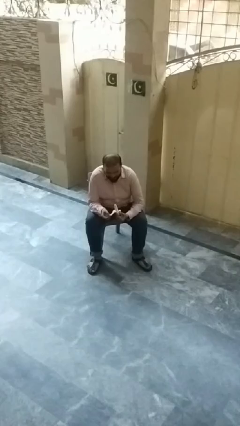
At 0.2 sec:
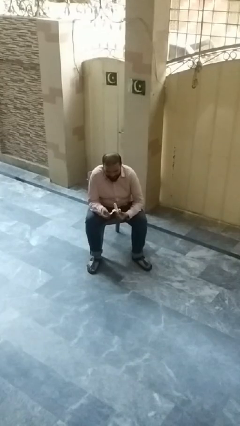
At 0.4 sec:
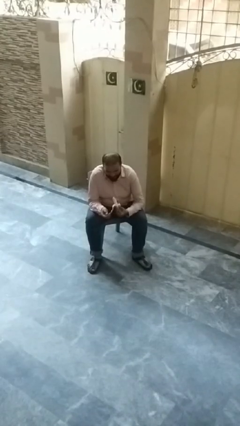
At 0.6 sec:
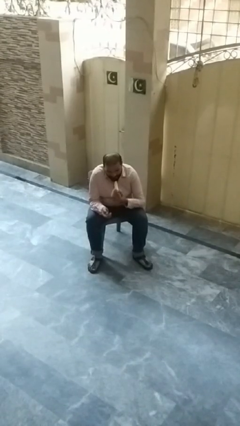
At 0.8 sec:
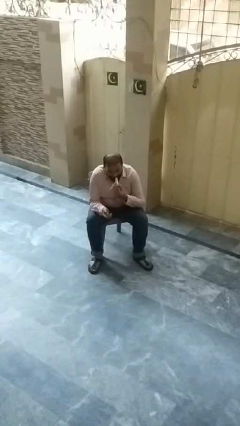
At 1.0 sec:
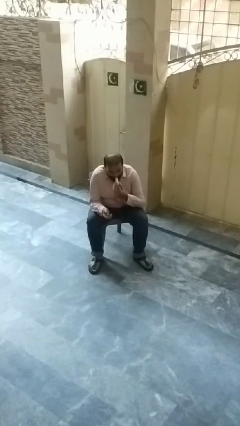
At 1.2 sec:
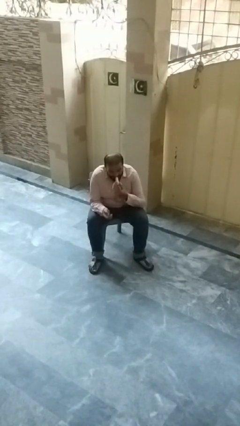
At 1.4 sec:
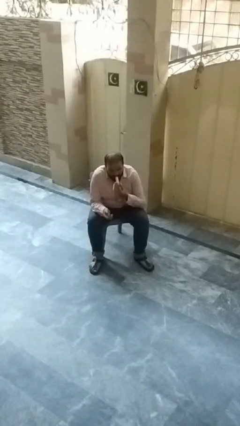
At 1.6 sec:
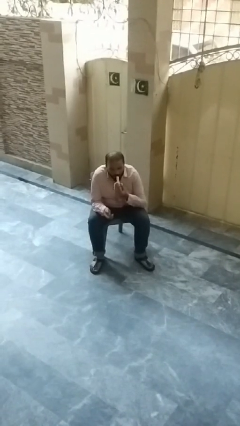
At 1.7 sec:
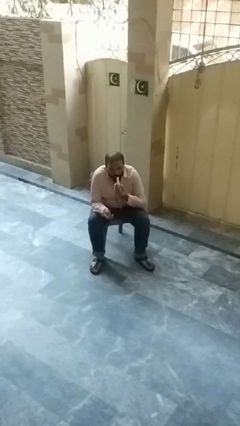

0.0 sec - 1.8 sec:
person eats banana

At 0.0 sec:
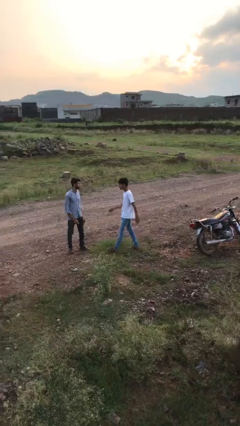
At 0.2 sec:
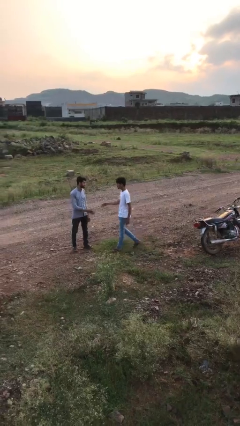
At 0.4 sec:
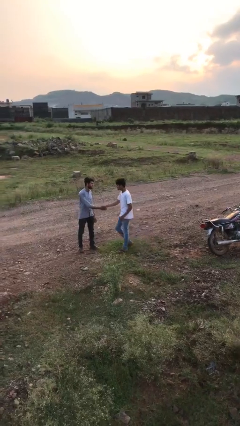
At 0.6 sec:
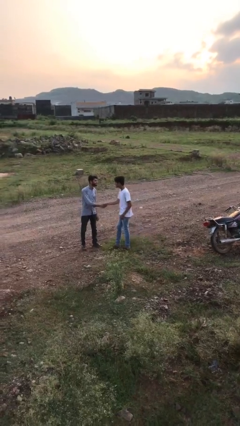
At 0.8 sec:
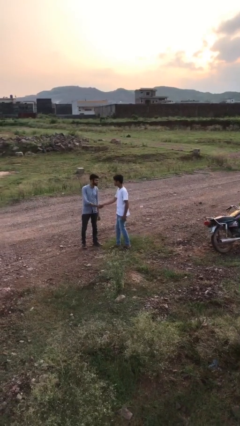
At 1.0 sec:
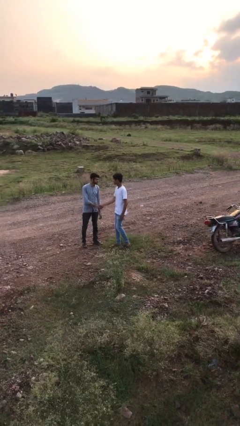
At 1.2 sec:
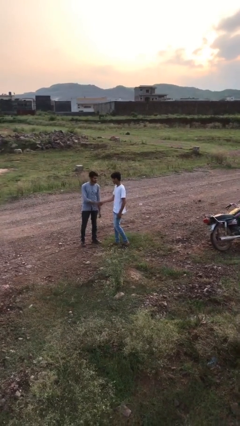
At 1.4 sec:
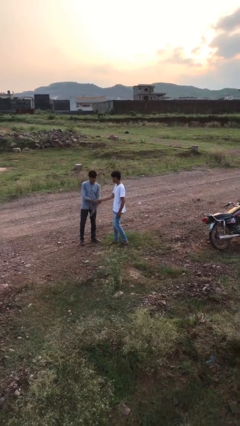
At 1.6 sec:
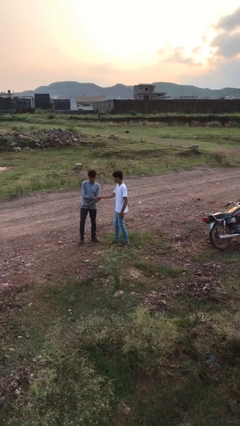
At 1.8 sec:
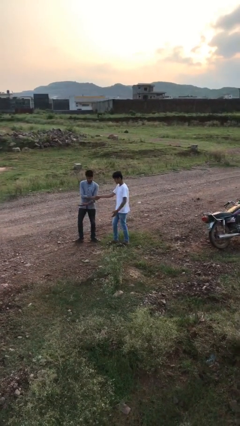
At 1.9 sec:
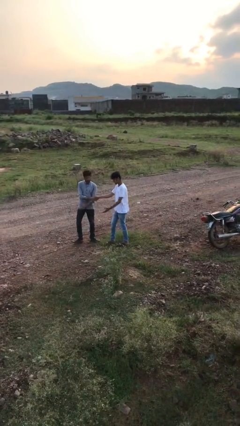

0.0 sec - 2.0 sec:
person shakes hand

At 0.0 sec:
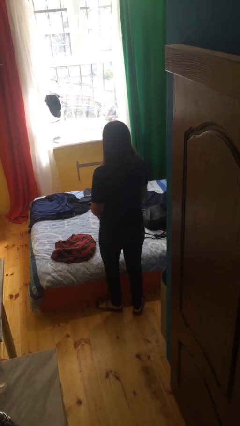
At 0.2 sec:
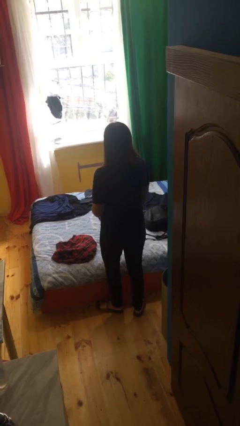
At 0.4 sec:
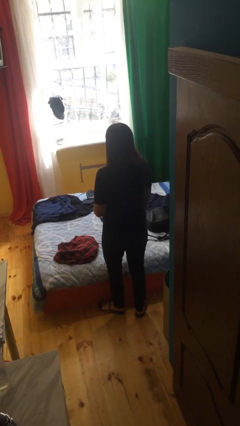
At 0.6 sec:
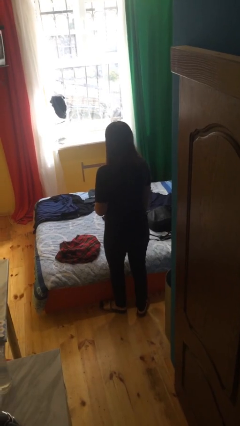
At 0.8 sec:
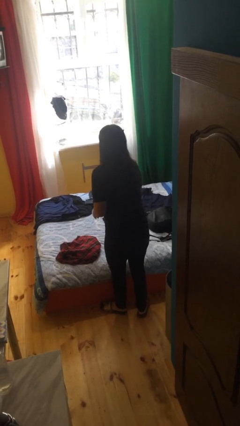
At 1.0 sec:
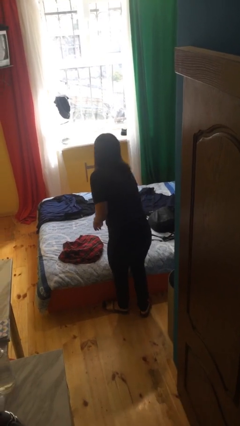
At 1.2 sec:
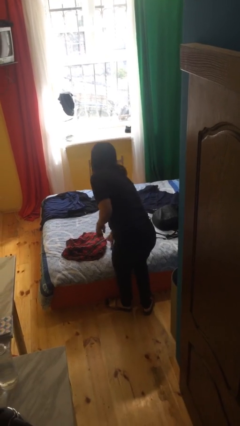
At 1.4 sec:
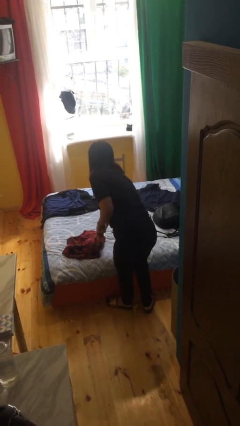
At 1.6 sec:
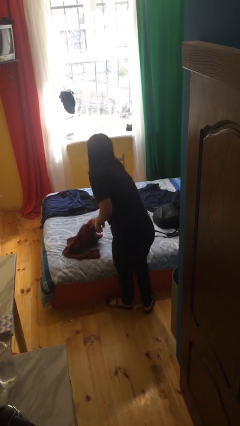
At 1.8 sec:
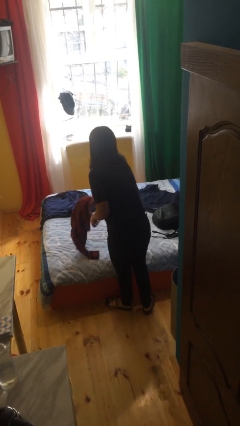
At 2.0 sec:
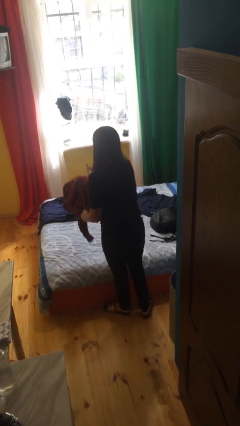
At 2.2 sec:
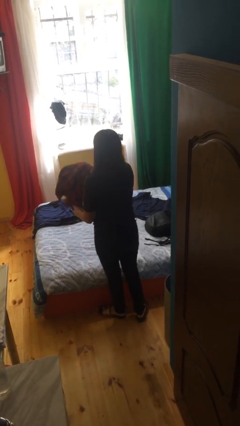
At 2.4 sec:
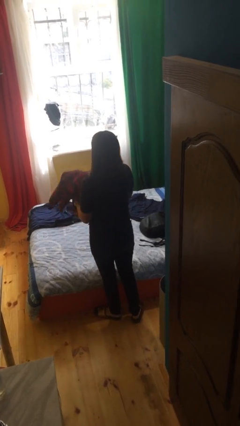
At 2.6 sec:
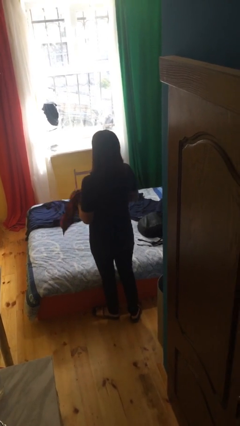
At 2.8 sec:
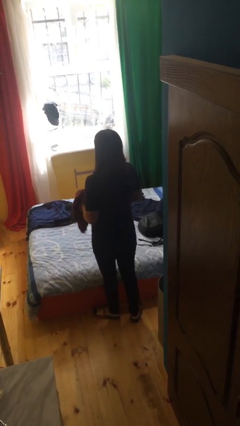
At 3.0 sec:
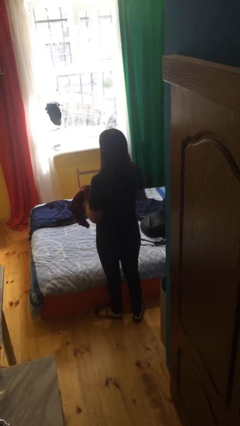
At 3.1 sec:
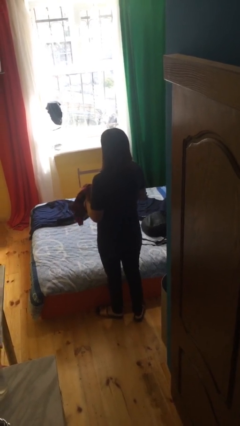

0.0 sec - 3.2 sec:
person picks up object from bed

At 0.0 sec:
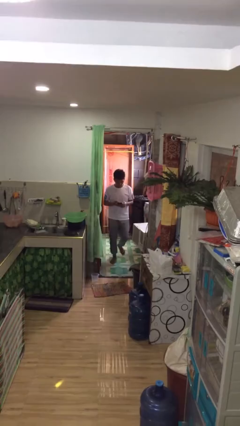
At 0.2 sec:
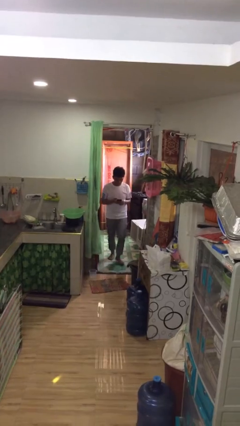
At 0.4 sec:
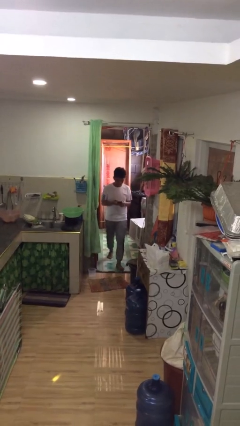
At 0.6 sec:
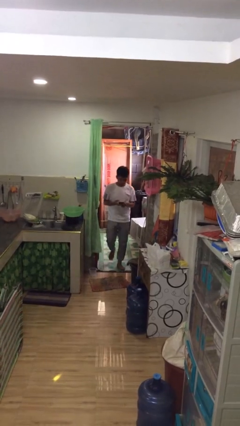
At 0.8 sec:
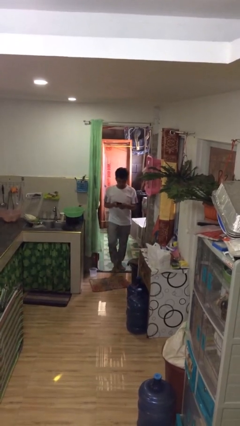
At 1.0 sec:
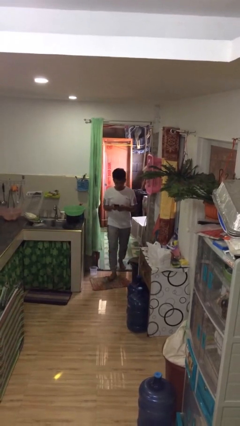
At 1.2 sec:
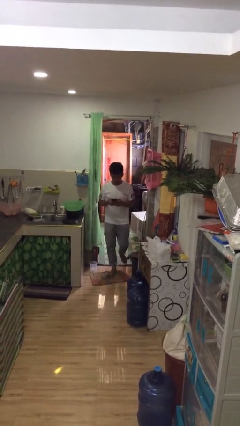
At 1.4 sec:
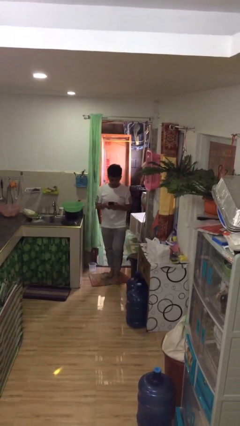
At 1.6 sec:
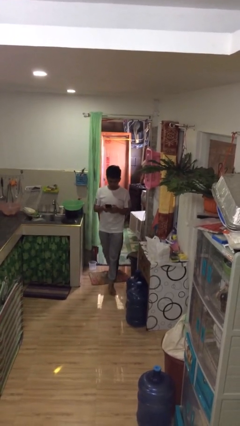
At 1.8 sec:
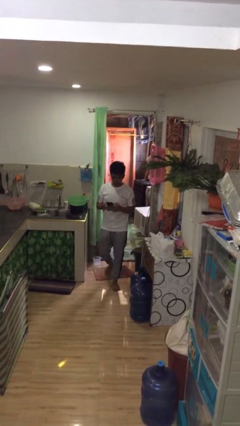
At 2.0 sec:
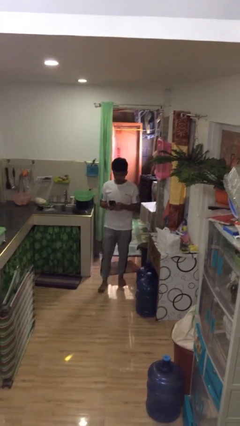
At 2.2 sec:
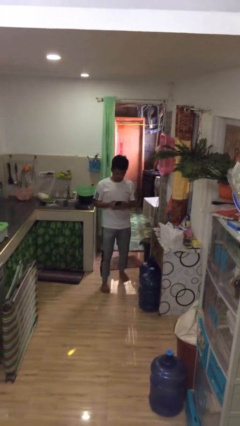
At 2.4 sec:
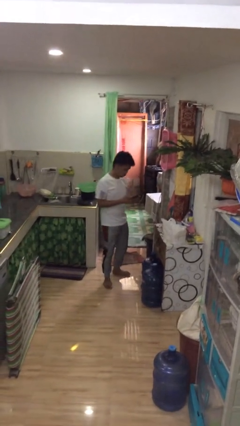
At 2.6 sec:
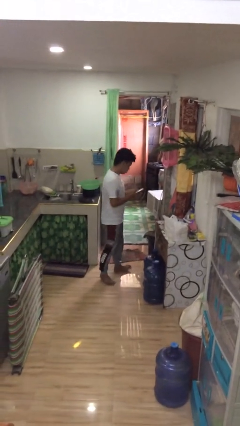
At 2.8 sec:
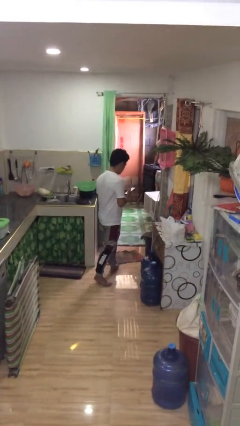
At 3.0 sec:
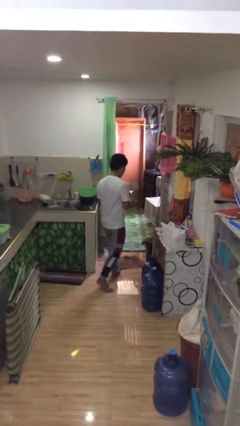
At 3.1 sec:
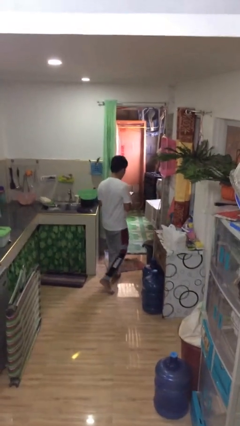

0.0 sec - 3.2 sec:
person enters scene through structure

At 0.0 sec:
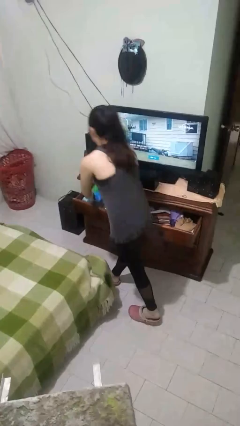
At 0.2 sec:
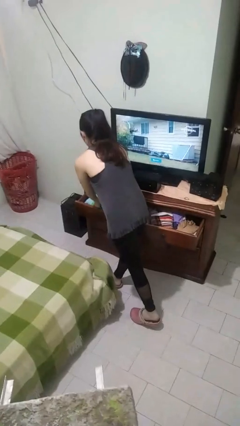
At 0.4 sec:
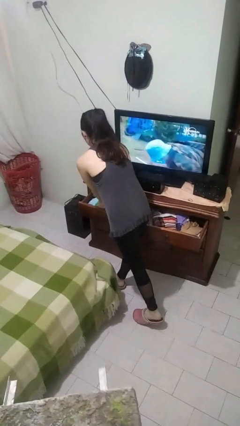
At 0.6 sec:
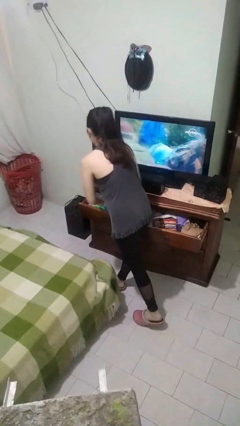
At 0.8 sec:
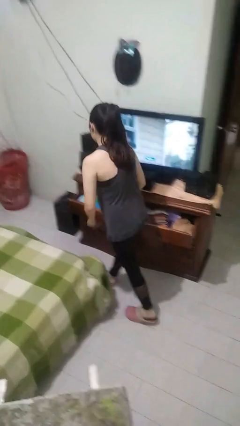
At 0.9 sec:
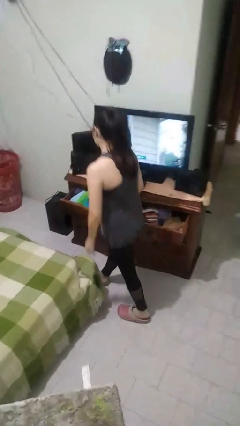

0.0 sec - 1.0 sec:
person puts clothes into dresser

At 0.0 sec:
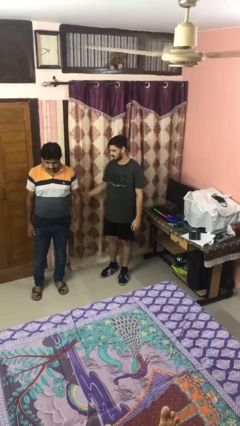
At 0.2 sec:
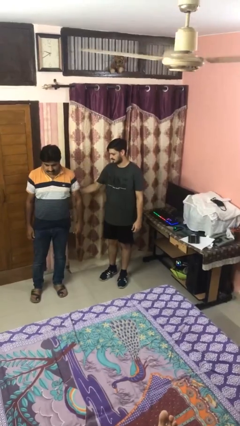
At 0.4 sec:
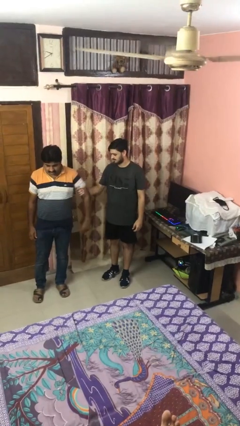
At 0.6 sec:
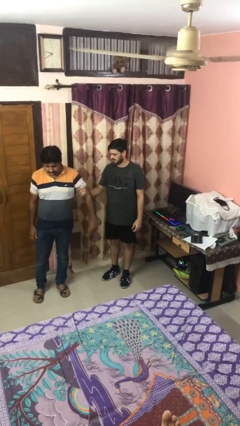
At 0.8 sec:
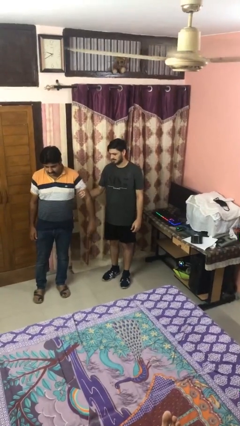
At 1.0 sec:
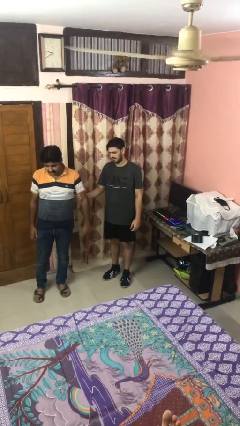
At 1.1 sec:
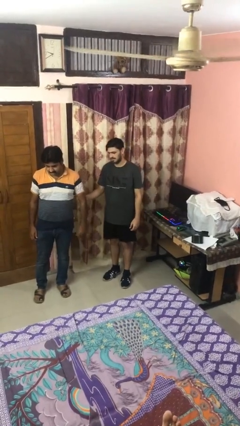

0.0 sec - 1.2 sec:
person grabs person by bicep

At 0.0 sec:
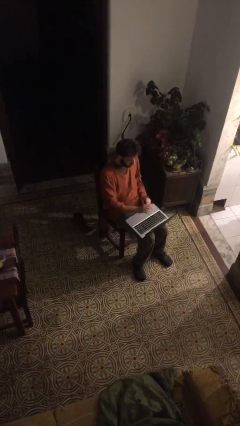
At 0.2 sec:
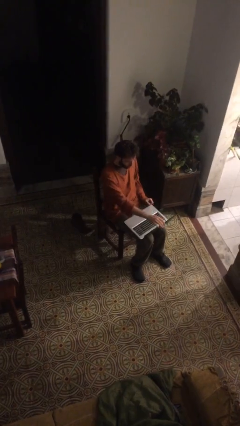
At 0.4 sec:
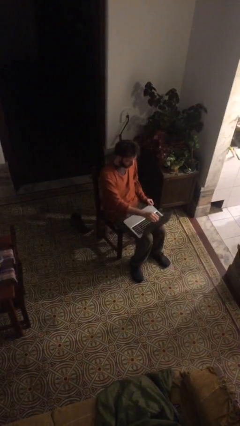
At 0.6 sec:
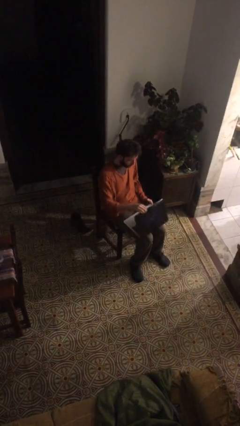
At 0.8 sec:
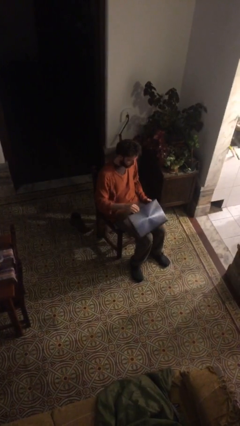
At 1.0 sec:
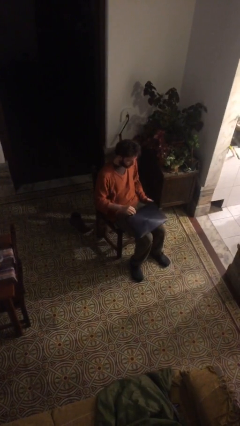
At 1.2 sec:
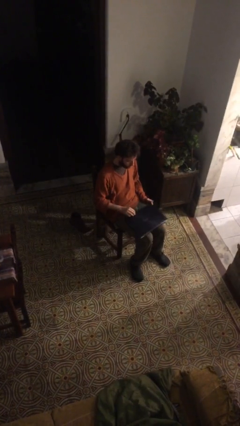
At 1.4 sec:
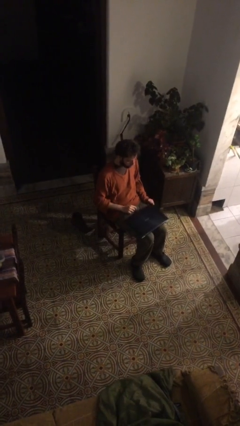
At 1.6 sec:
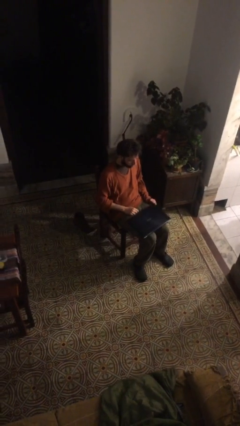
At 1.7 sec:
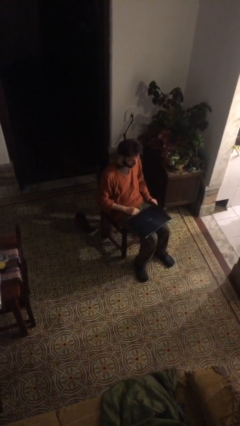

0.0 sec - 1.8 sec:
person closes laptop

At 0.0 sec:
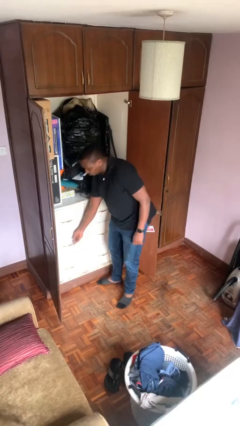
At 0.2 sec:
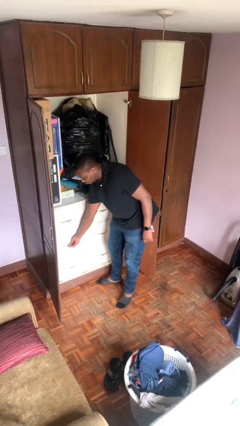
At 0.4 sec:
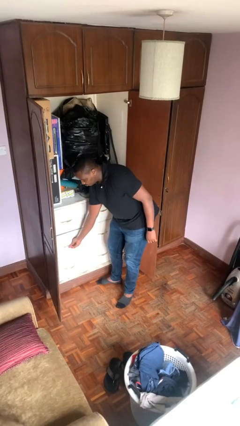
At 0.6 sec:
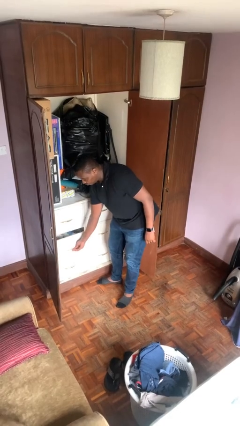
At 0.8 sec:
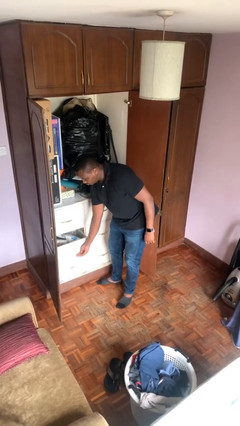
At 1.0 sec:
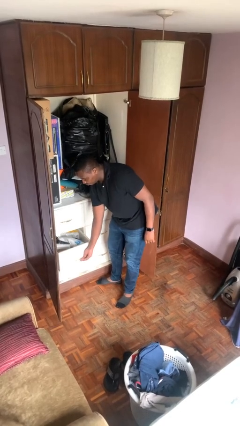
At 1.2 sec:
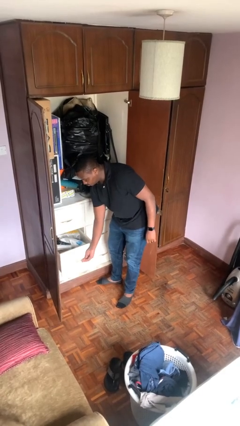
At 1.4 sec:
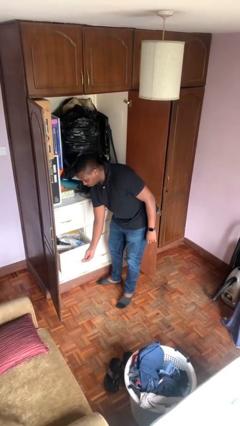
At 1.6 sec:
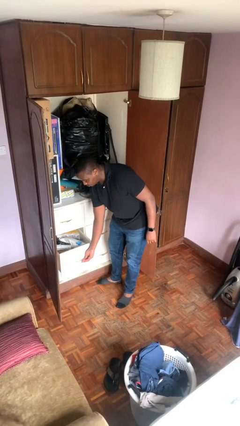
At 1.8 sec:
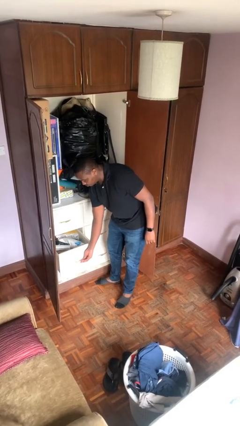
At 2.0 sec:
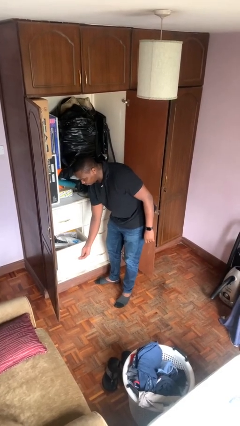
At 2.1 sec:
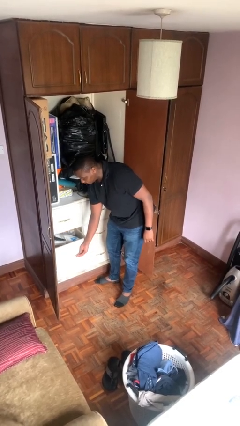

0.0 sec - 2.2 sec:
person opens dresser drawer

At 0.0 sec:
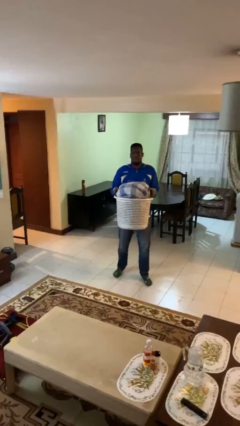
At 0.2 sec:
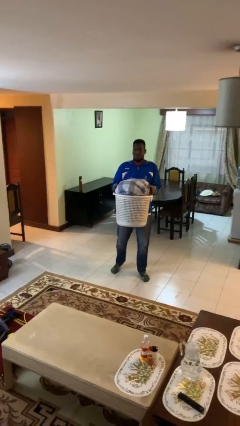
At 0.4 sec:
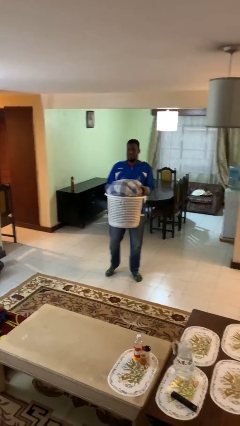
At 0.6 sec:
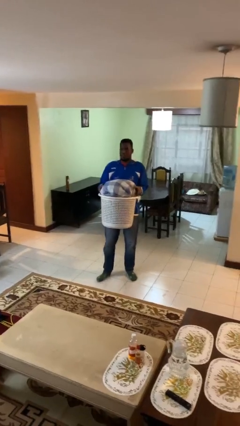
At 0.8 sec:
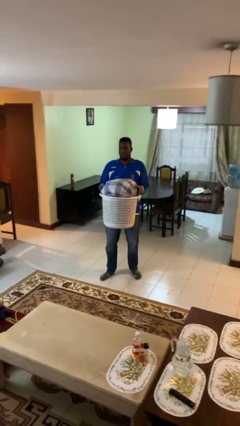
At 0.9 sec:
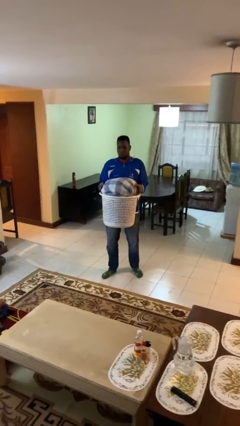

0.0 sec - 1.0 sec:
person puts down object on floor
